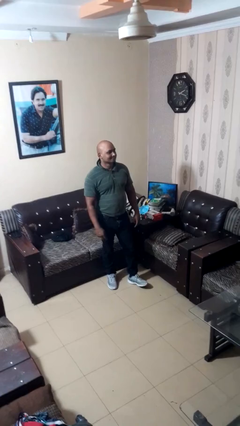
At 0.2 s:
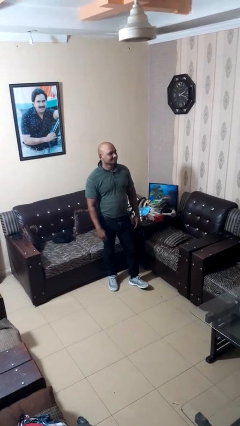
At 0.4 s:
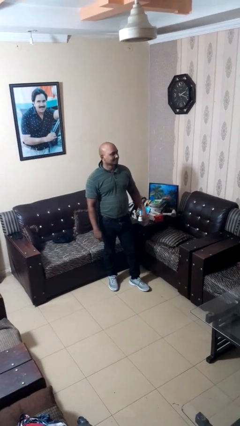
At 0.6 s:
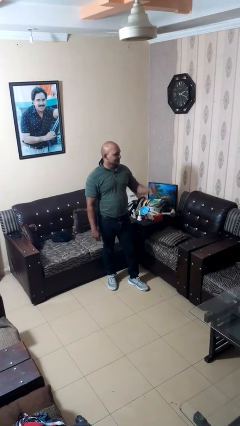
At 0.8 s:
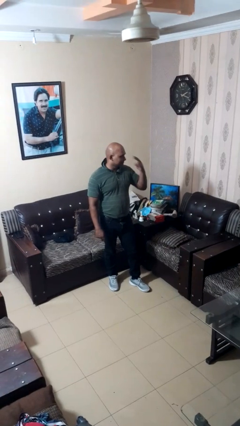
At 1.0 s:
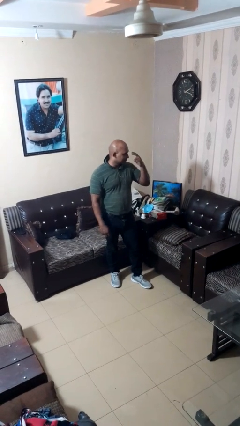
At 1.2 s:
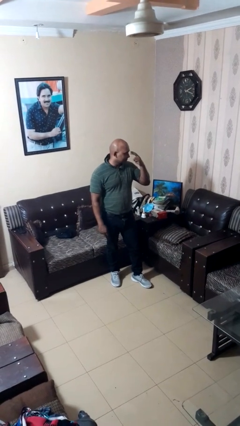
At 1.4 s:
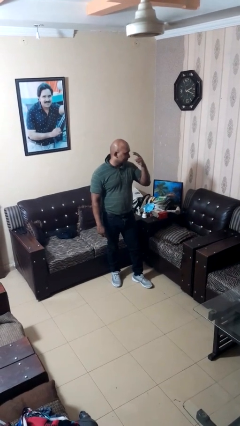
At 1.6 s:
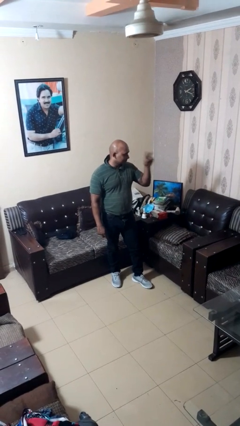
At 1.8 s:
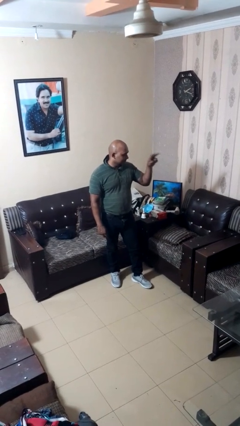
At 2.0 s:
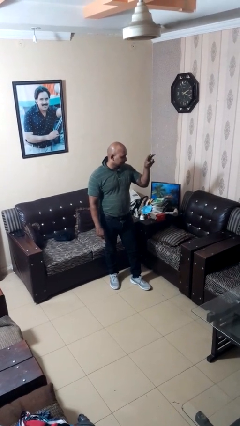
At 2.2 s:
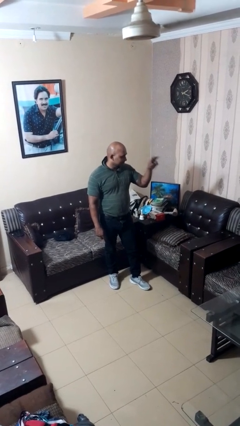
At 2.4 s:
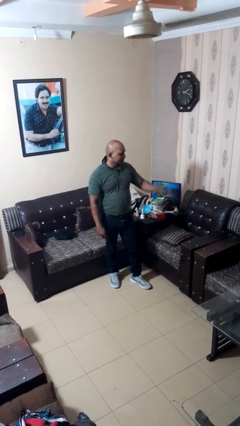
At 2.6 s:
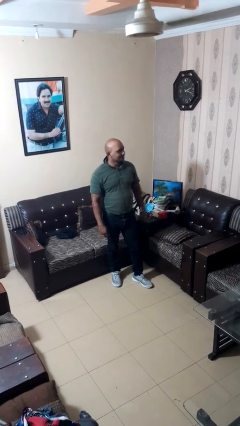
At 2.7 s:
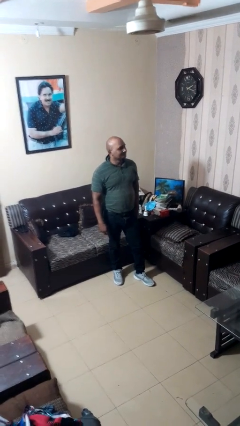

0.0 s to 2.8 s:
person gestures watch closely

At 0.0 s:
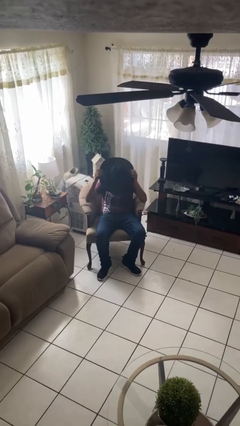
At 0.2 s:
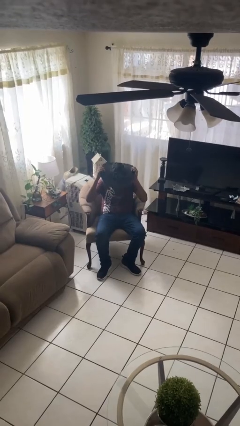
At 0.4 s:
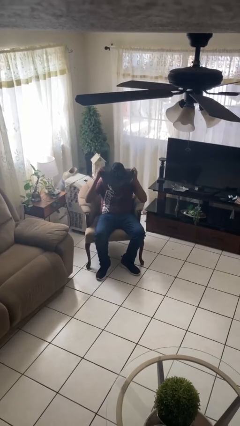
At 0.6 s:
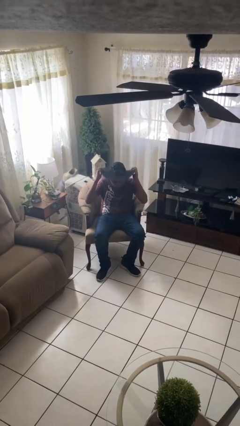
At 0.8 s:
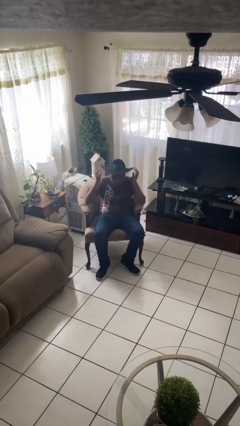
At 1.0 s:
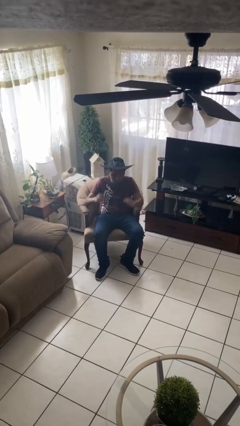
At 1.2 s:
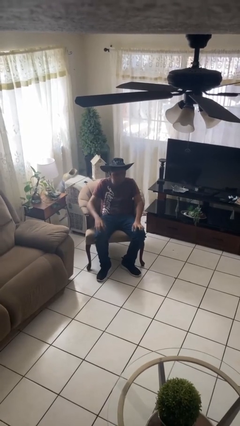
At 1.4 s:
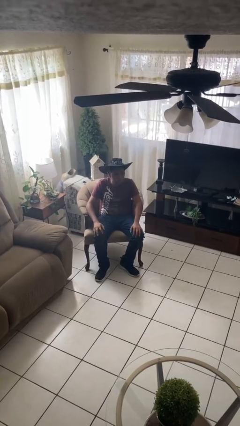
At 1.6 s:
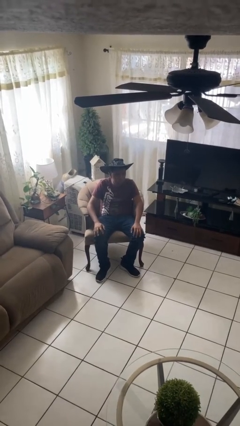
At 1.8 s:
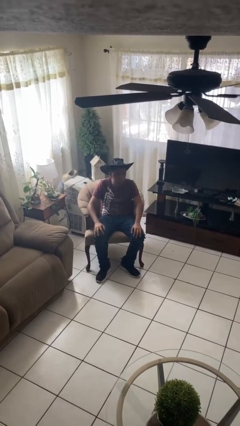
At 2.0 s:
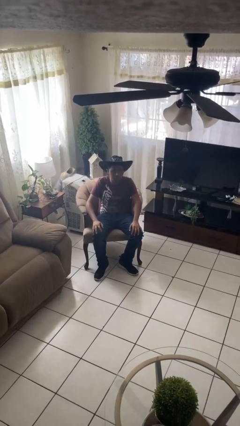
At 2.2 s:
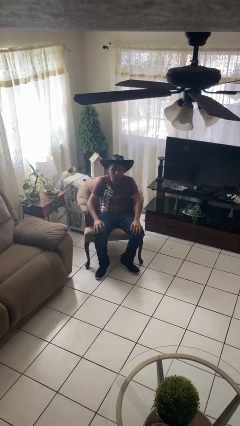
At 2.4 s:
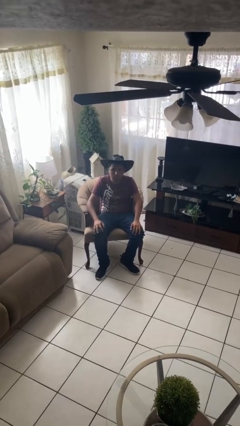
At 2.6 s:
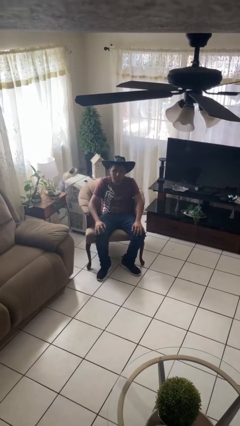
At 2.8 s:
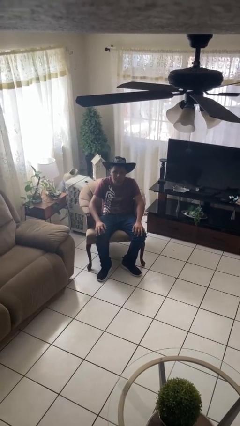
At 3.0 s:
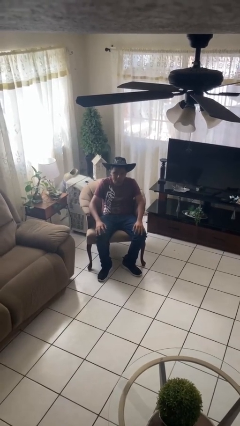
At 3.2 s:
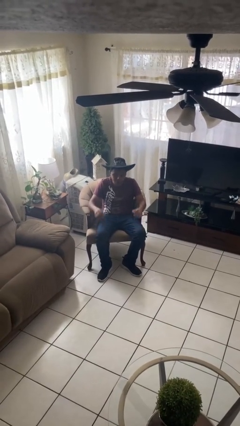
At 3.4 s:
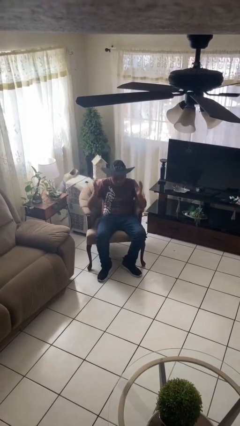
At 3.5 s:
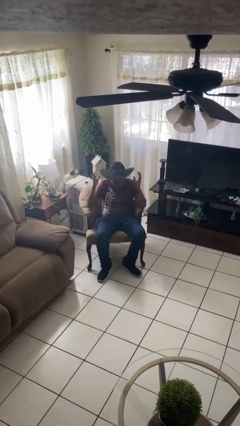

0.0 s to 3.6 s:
person puts on hat

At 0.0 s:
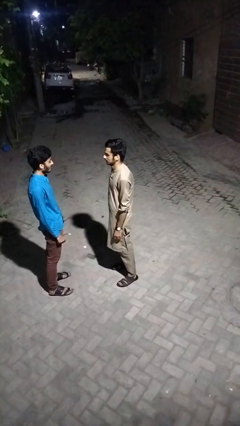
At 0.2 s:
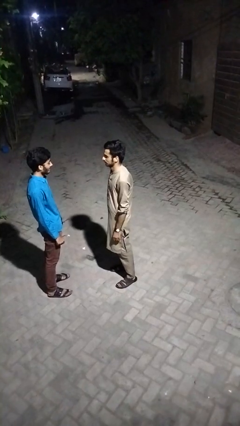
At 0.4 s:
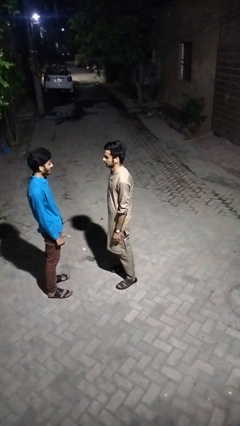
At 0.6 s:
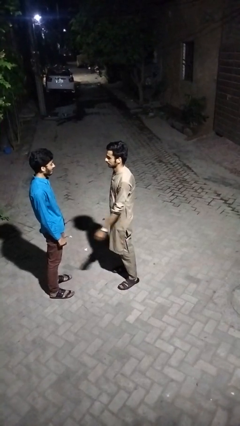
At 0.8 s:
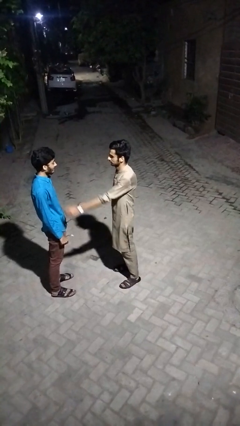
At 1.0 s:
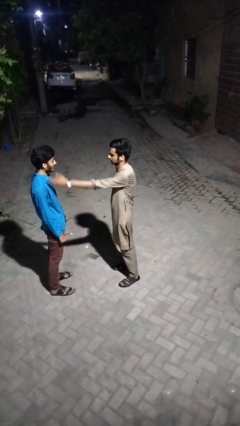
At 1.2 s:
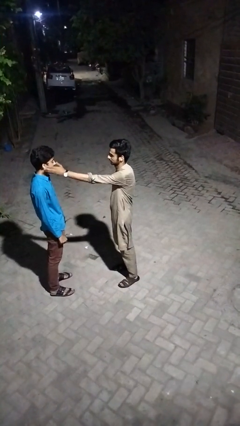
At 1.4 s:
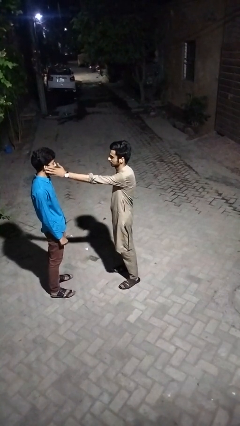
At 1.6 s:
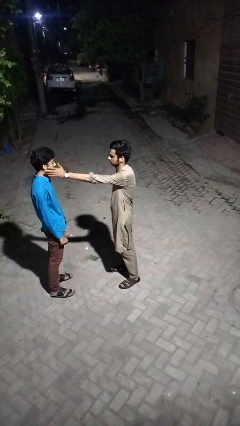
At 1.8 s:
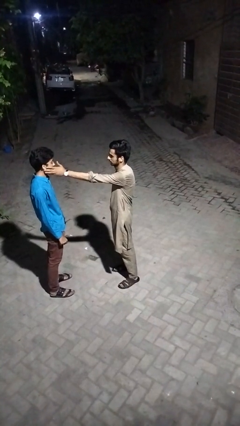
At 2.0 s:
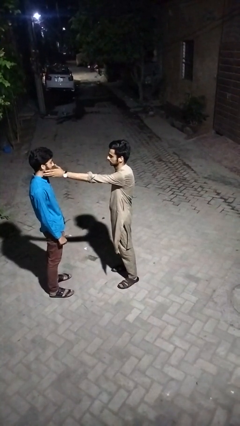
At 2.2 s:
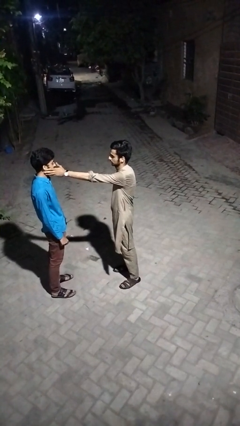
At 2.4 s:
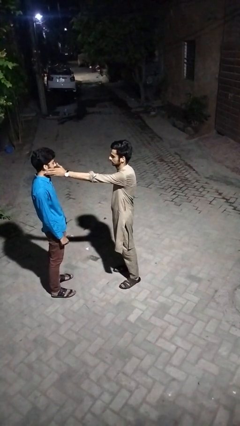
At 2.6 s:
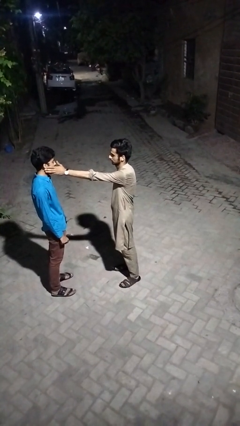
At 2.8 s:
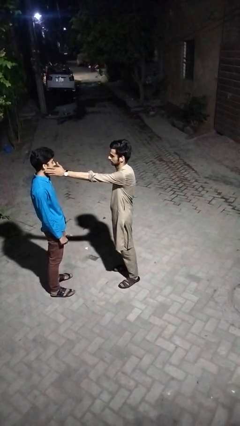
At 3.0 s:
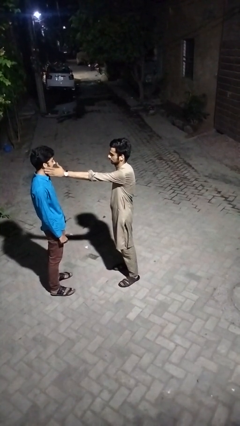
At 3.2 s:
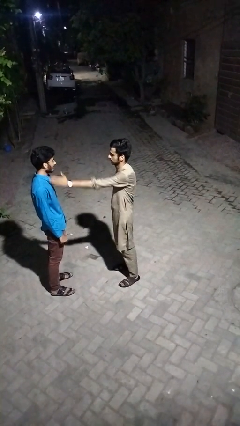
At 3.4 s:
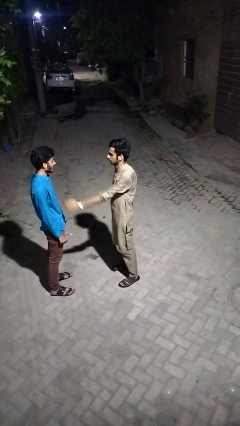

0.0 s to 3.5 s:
person touches face of person

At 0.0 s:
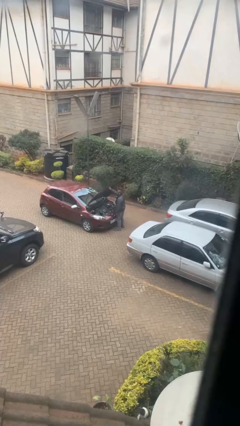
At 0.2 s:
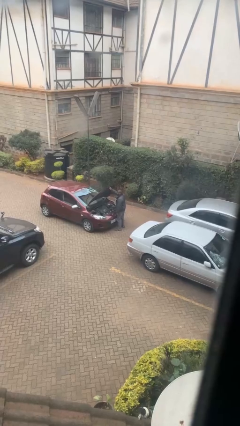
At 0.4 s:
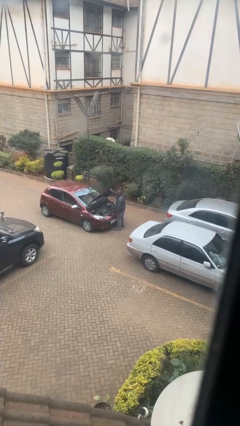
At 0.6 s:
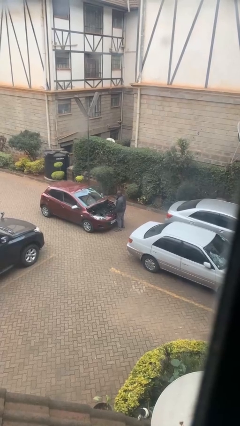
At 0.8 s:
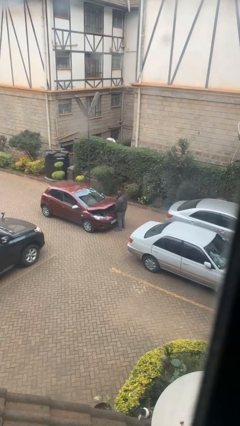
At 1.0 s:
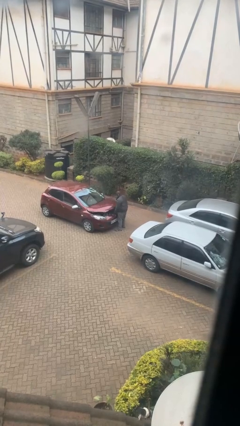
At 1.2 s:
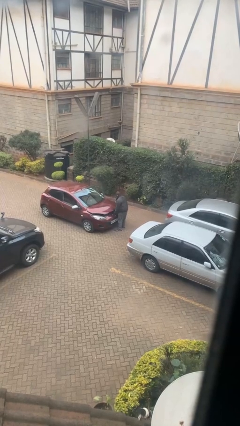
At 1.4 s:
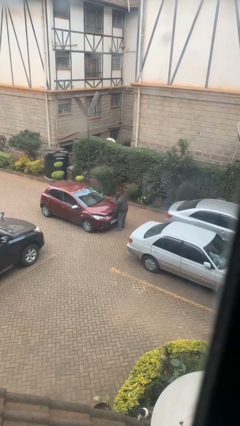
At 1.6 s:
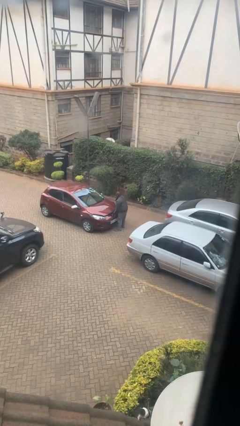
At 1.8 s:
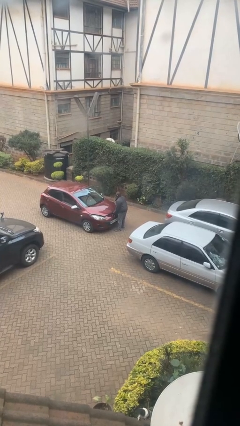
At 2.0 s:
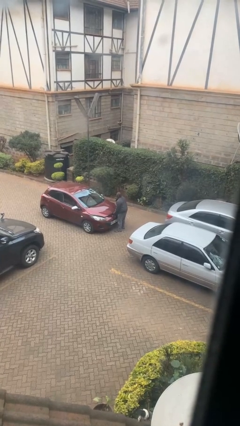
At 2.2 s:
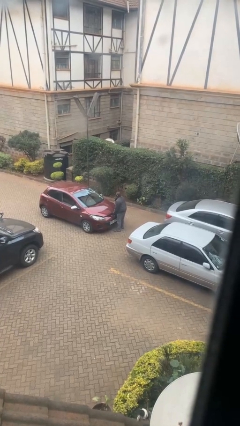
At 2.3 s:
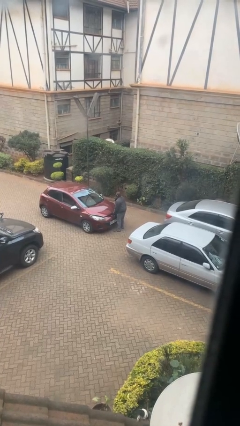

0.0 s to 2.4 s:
person closes car hood

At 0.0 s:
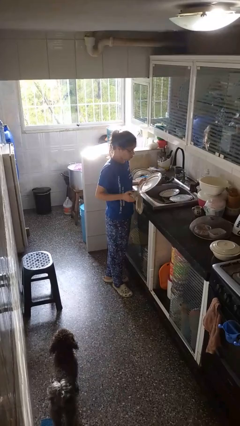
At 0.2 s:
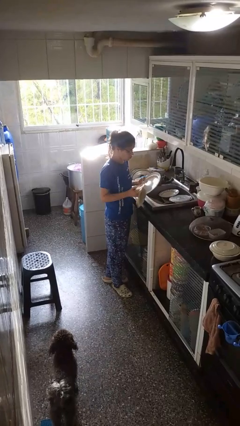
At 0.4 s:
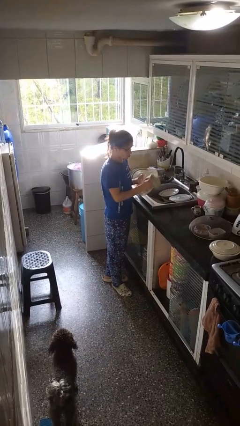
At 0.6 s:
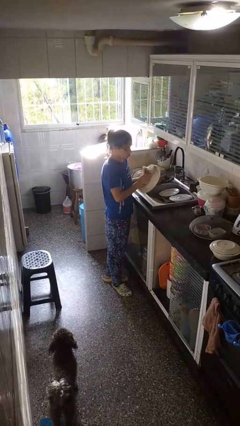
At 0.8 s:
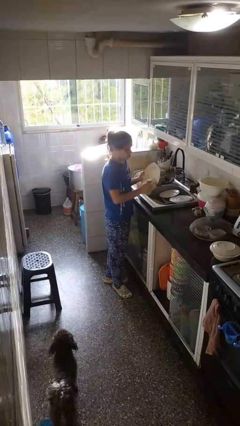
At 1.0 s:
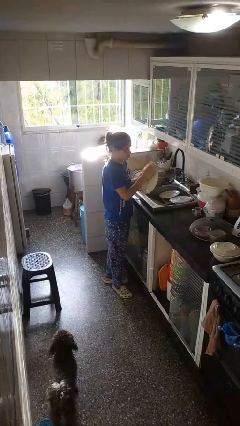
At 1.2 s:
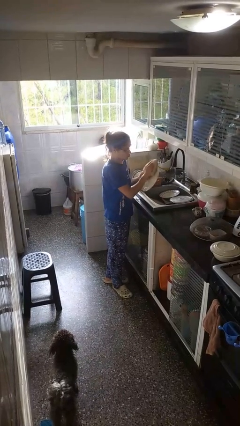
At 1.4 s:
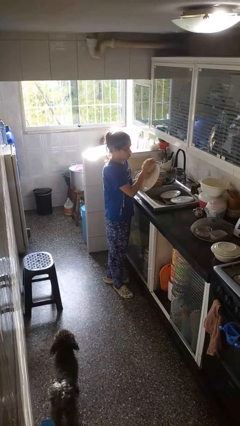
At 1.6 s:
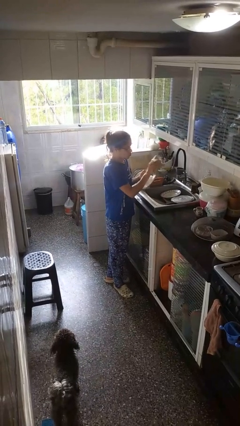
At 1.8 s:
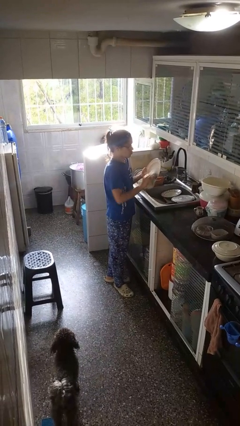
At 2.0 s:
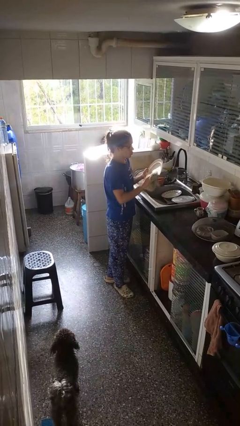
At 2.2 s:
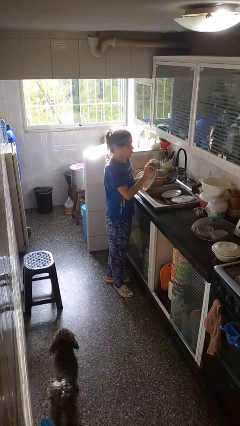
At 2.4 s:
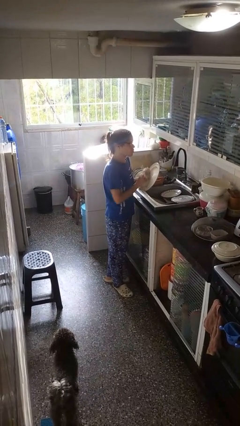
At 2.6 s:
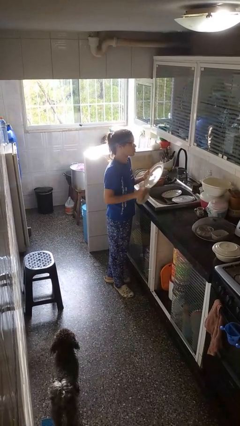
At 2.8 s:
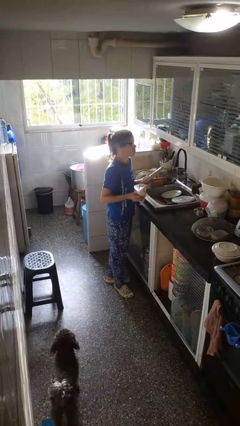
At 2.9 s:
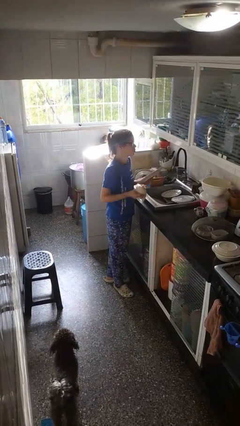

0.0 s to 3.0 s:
person dries dish

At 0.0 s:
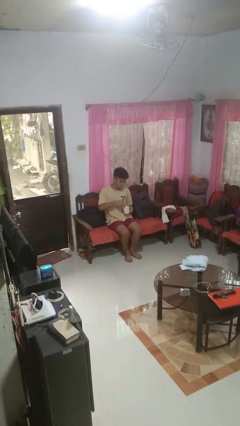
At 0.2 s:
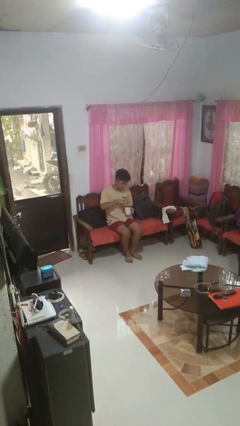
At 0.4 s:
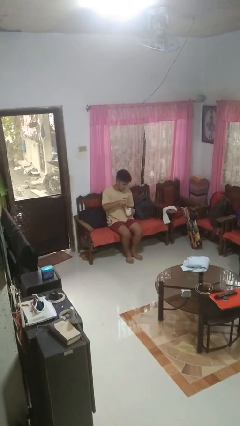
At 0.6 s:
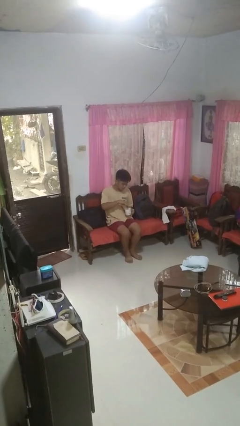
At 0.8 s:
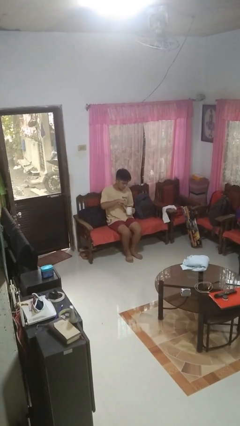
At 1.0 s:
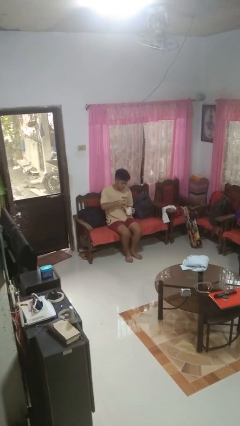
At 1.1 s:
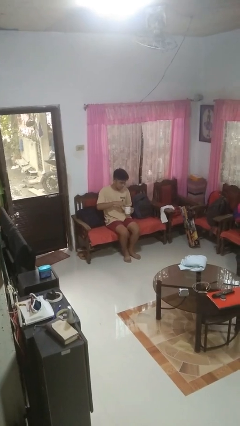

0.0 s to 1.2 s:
person stirs mug

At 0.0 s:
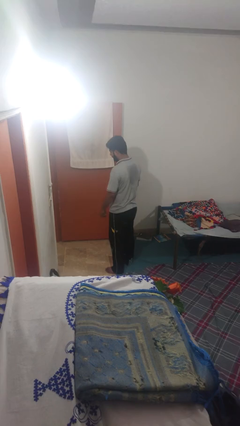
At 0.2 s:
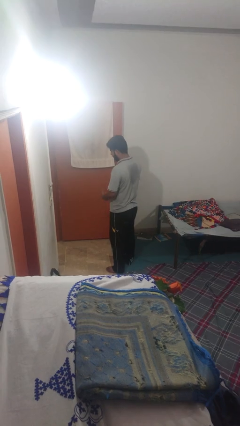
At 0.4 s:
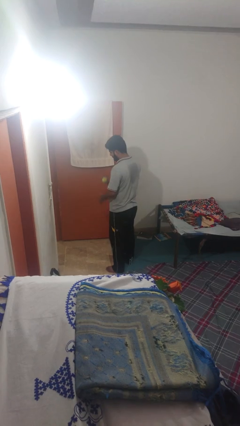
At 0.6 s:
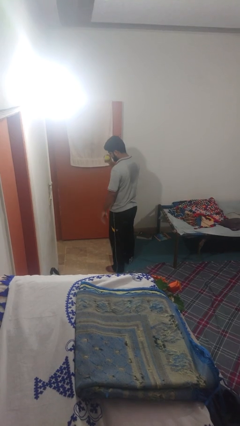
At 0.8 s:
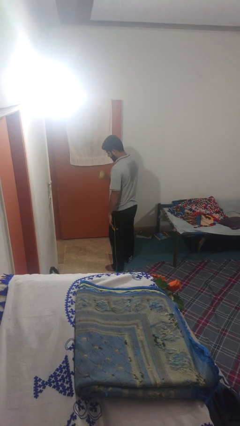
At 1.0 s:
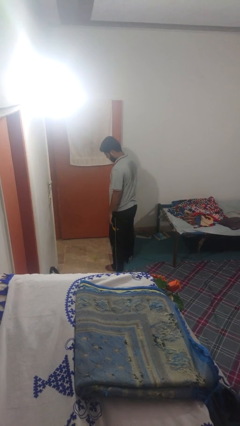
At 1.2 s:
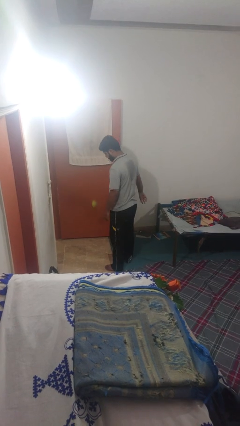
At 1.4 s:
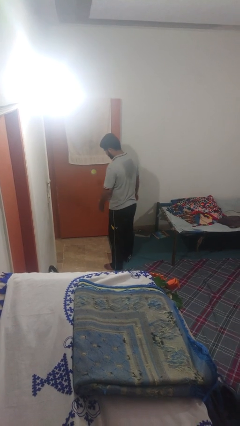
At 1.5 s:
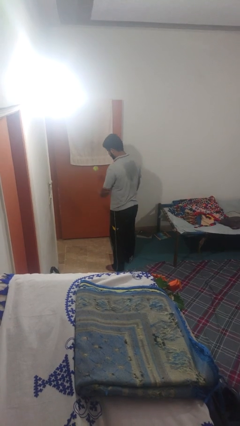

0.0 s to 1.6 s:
person bounces ball on floor
